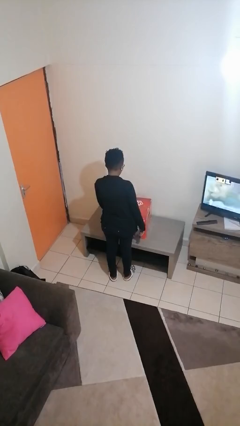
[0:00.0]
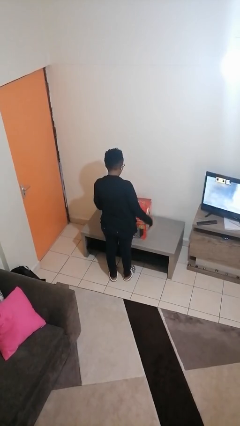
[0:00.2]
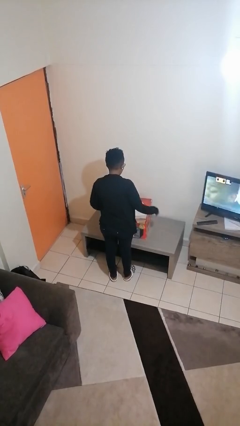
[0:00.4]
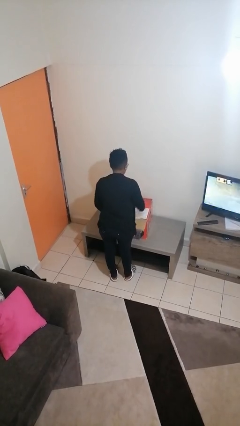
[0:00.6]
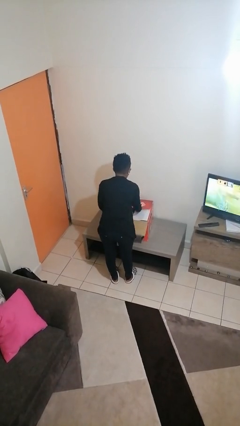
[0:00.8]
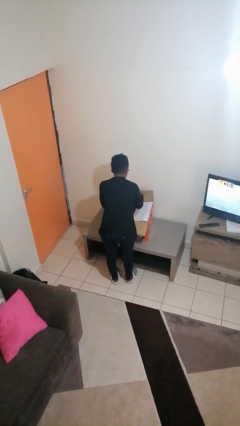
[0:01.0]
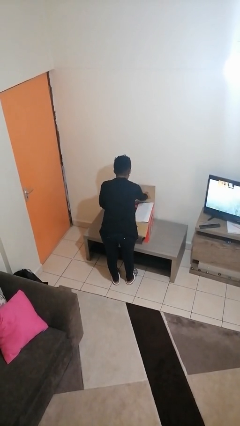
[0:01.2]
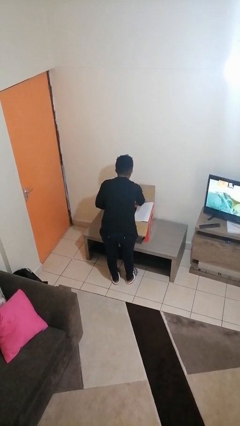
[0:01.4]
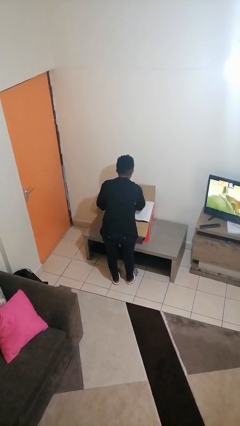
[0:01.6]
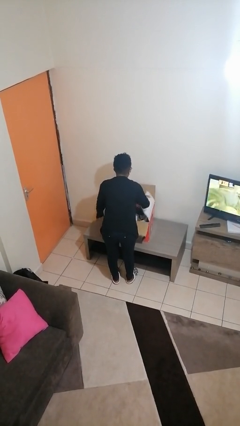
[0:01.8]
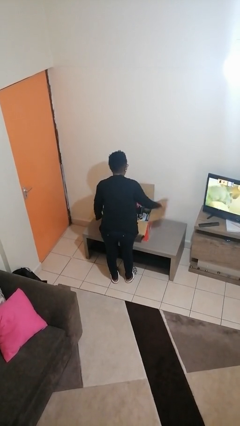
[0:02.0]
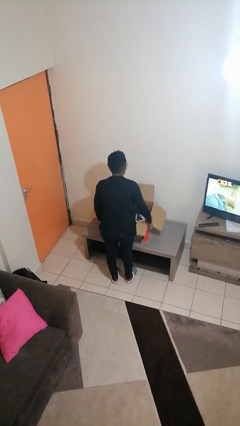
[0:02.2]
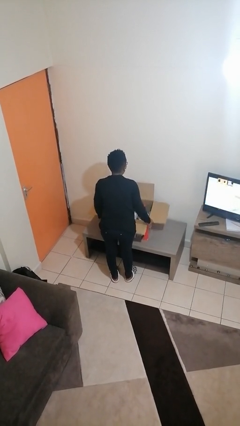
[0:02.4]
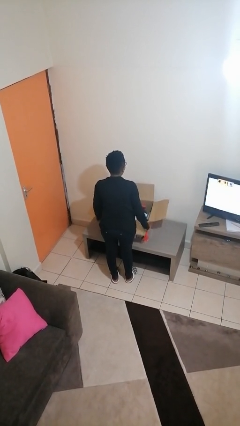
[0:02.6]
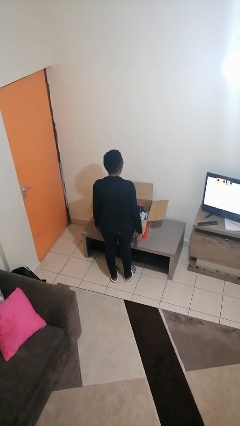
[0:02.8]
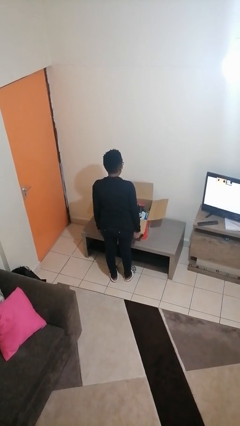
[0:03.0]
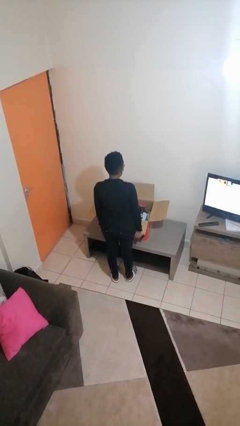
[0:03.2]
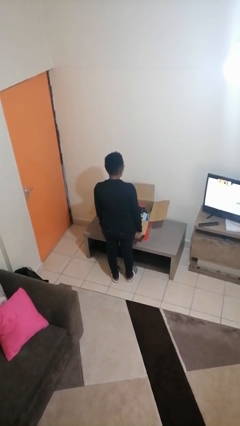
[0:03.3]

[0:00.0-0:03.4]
person opens box

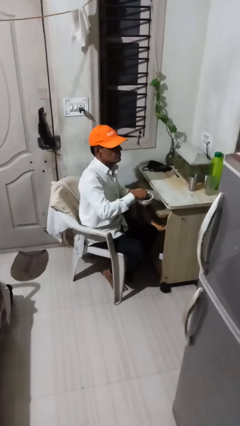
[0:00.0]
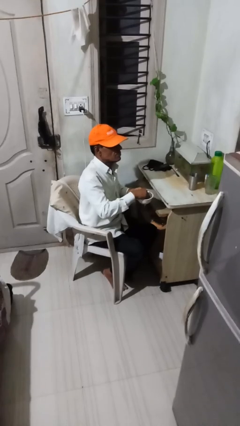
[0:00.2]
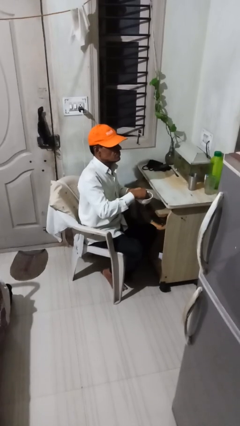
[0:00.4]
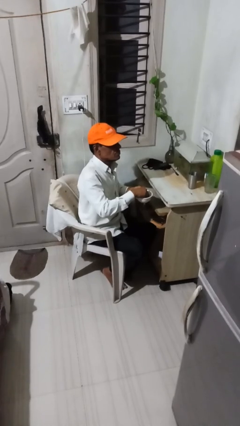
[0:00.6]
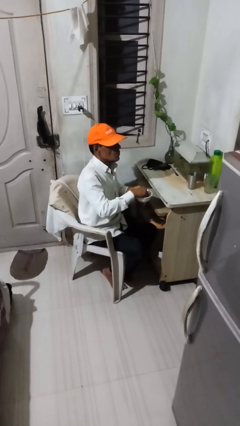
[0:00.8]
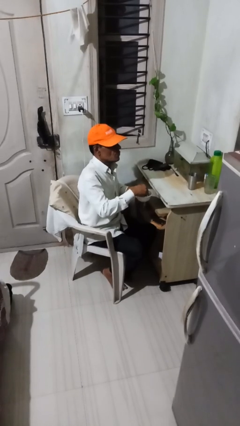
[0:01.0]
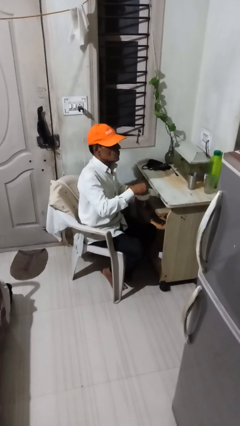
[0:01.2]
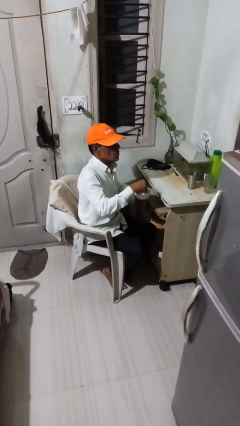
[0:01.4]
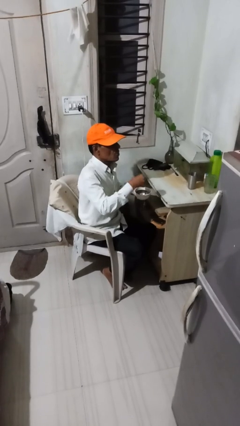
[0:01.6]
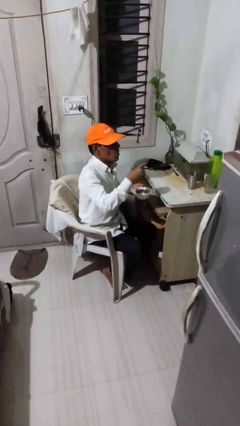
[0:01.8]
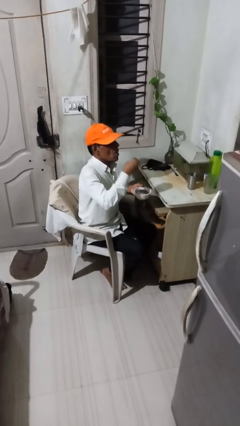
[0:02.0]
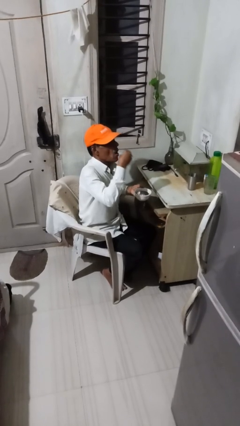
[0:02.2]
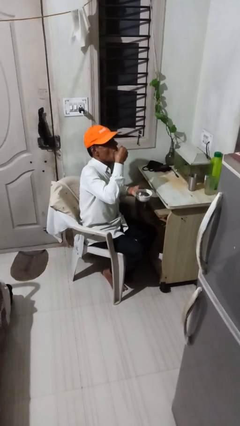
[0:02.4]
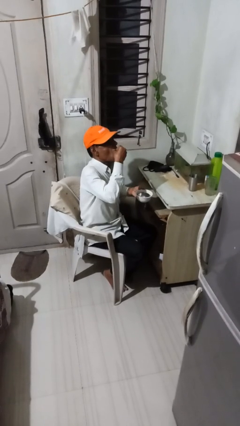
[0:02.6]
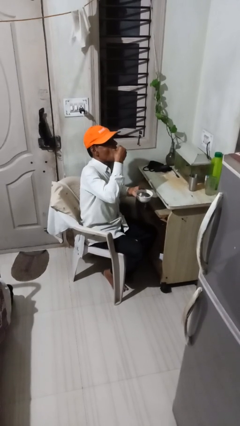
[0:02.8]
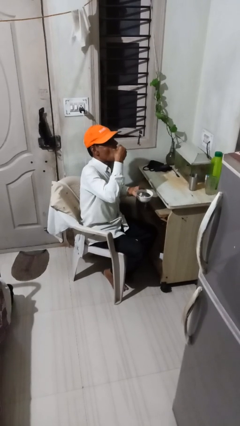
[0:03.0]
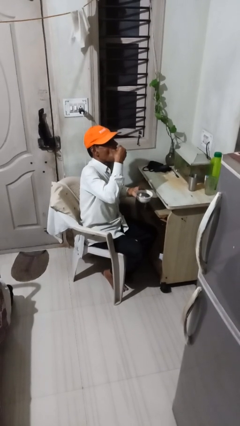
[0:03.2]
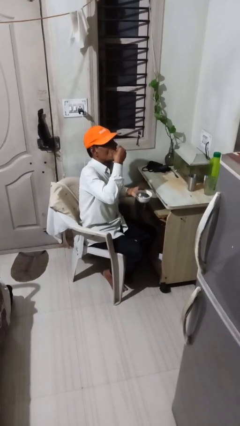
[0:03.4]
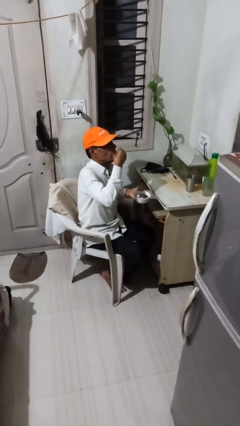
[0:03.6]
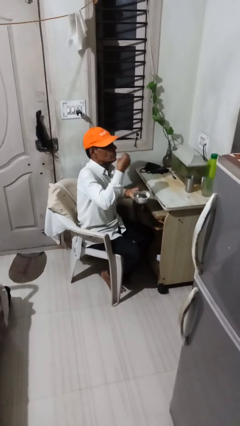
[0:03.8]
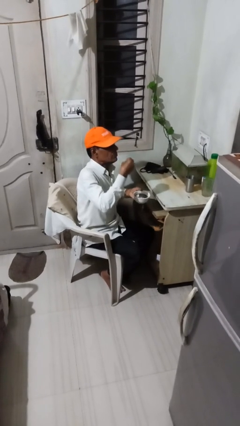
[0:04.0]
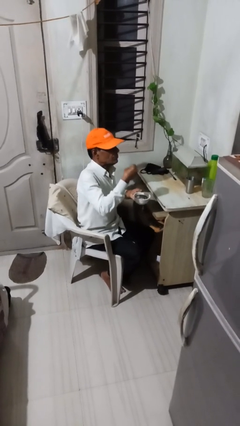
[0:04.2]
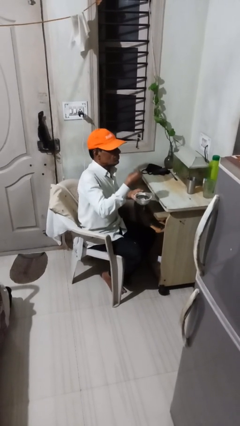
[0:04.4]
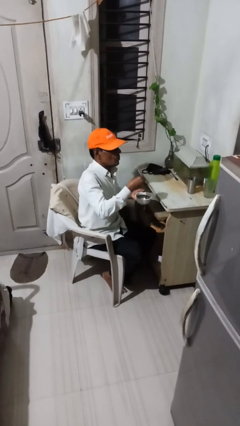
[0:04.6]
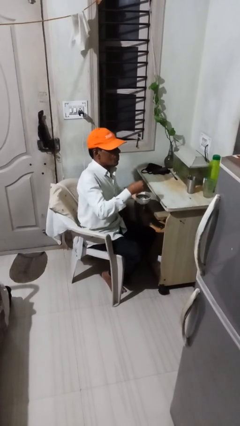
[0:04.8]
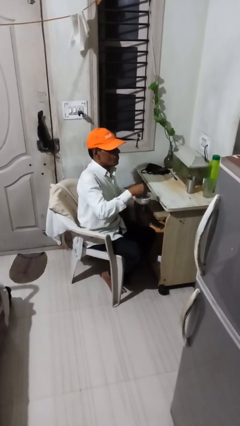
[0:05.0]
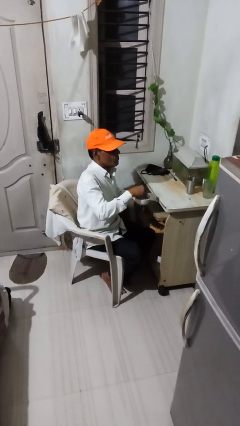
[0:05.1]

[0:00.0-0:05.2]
person eats with hands

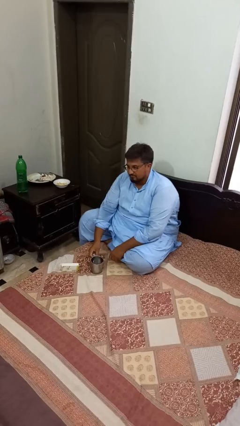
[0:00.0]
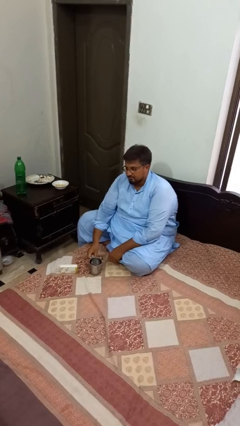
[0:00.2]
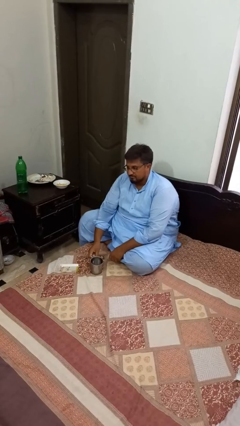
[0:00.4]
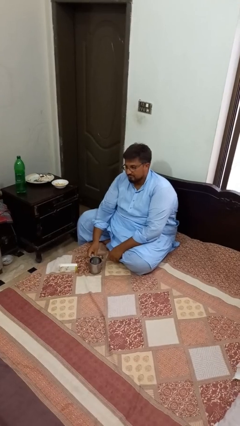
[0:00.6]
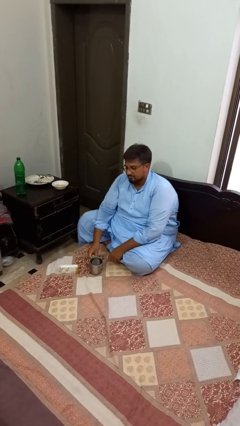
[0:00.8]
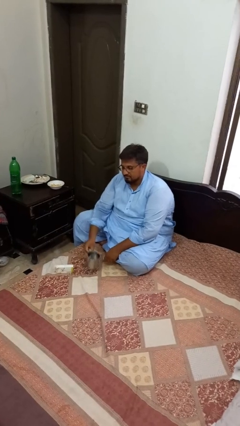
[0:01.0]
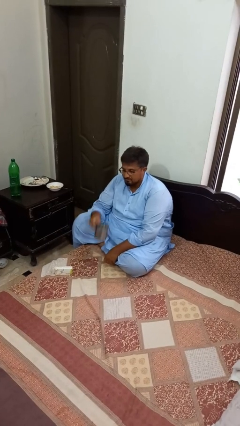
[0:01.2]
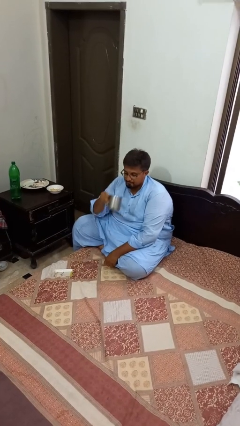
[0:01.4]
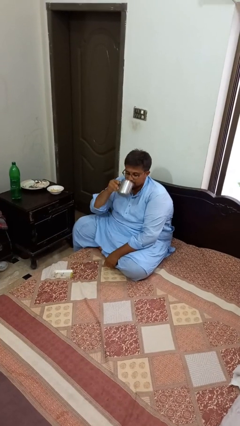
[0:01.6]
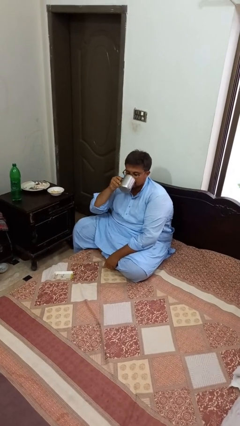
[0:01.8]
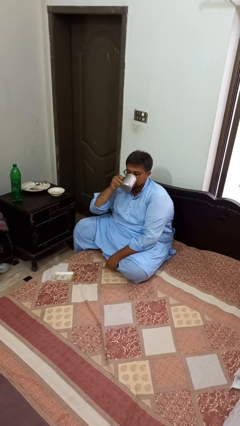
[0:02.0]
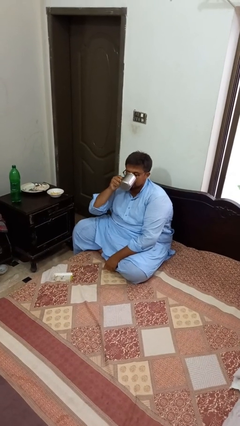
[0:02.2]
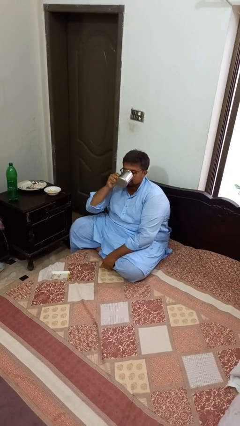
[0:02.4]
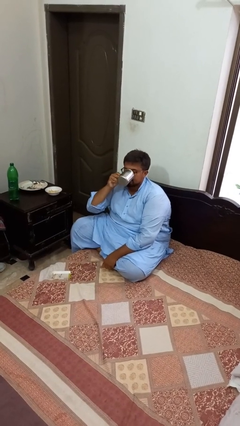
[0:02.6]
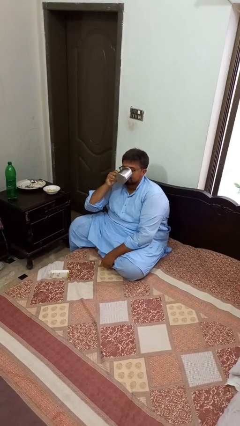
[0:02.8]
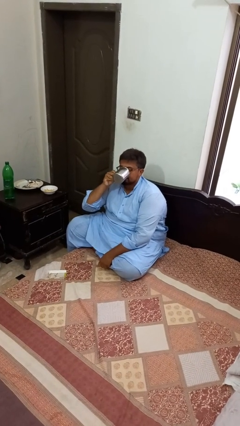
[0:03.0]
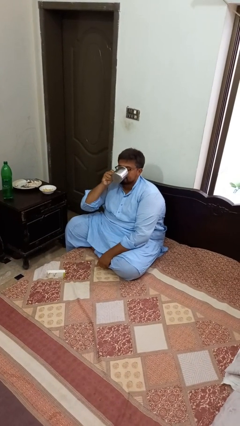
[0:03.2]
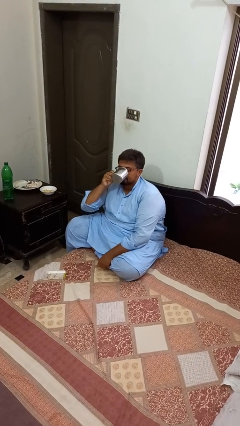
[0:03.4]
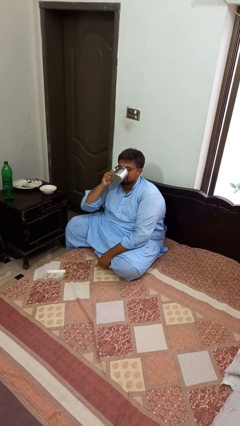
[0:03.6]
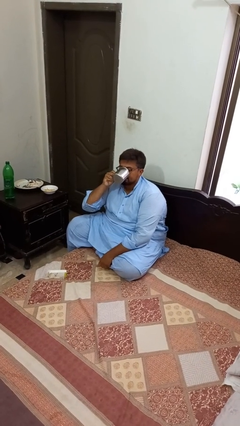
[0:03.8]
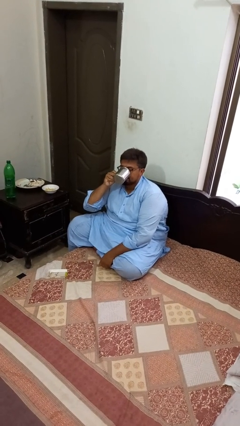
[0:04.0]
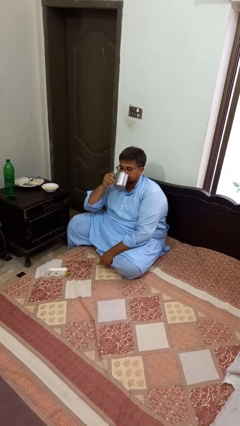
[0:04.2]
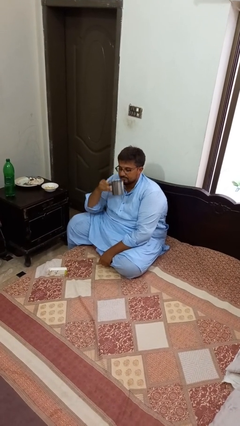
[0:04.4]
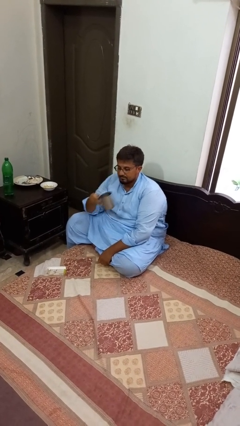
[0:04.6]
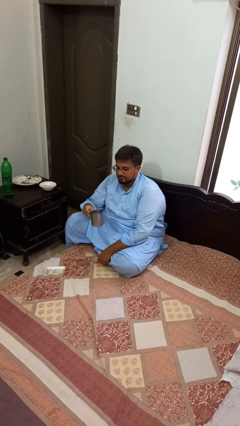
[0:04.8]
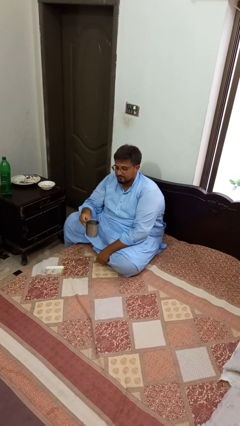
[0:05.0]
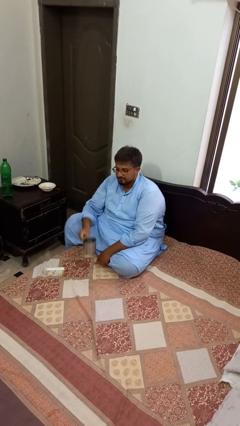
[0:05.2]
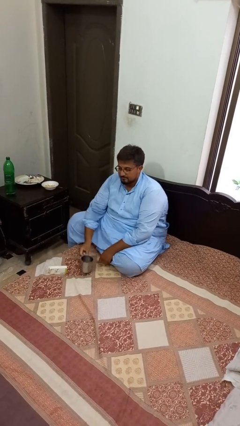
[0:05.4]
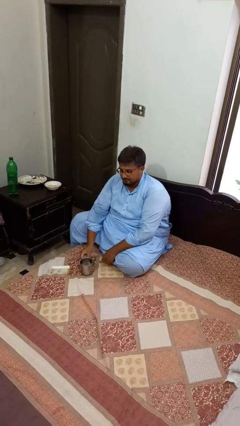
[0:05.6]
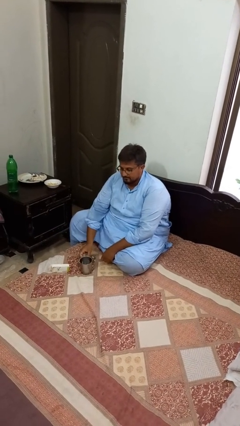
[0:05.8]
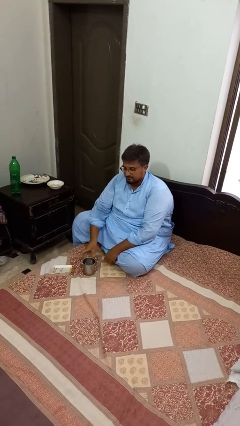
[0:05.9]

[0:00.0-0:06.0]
person drinks from cup

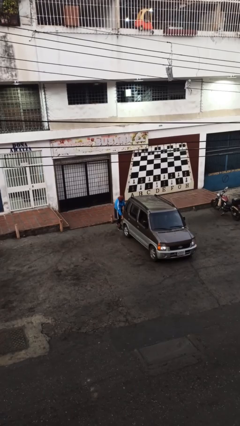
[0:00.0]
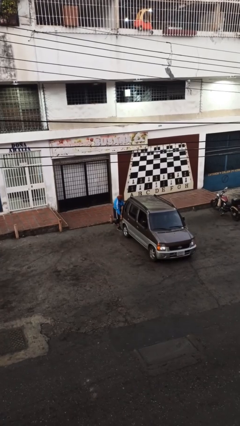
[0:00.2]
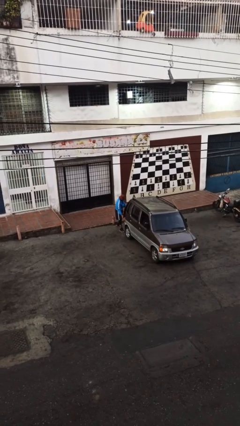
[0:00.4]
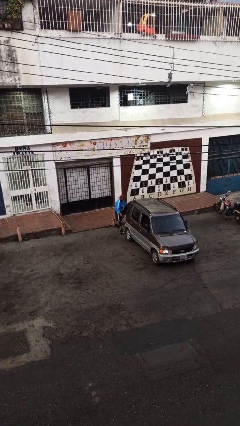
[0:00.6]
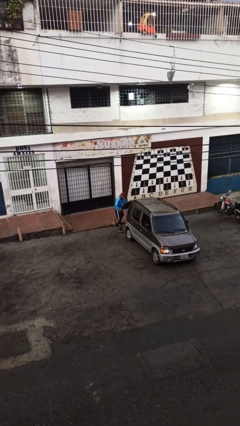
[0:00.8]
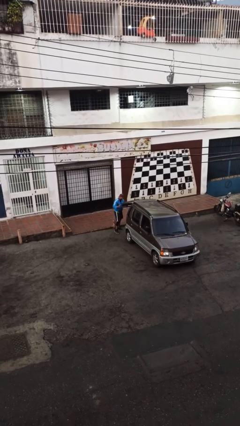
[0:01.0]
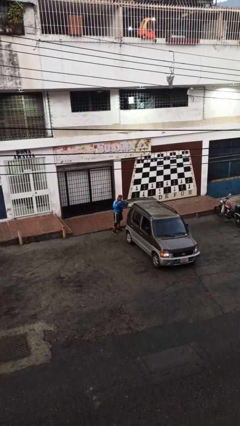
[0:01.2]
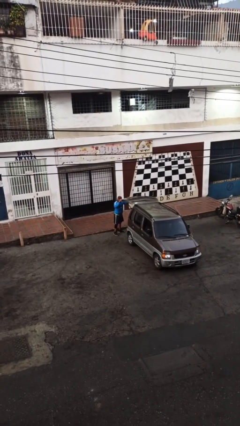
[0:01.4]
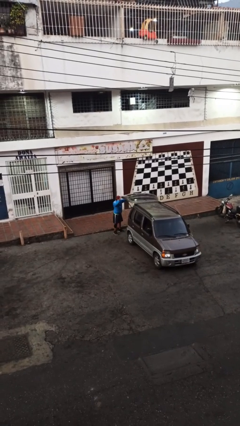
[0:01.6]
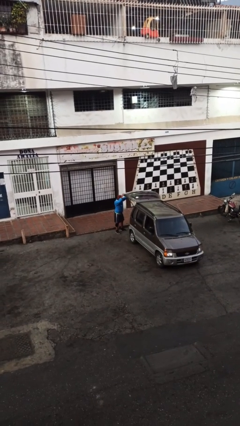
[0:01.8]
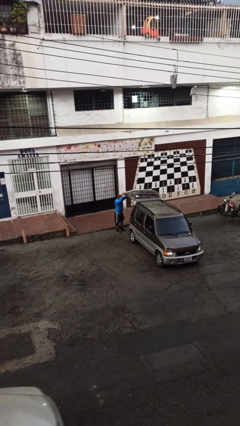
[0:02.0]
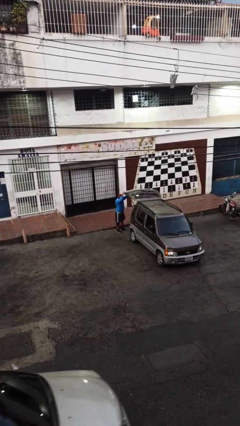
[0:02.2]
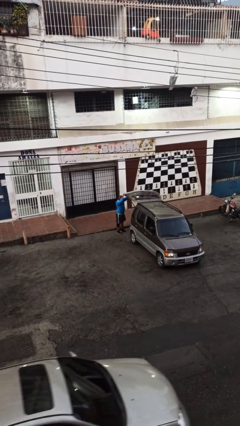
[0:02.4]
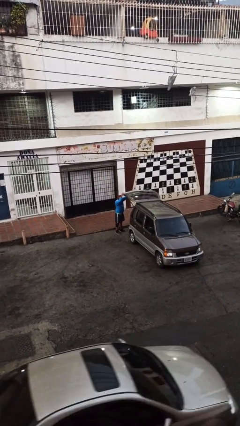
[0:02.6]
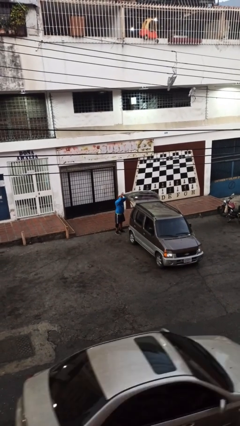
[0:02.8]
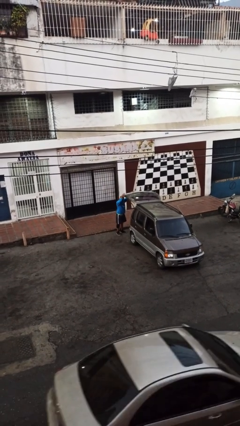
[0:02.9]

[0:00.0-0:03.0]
person opens car trunk
